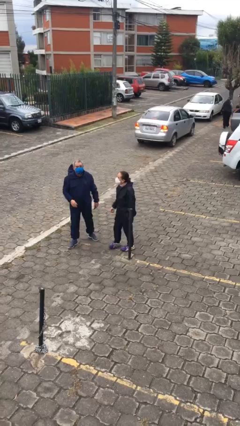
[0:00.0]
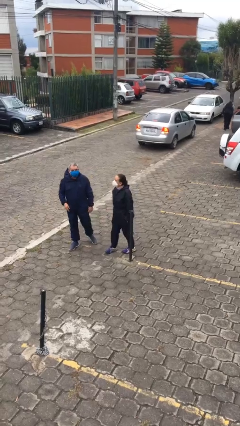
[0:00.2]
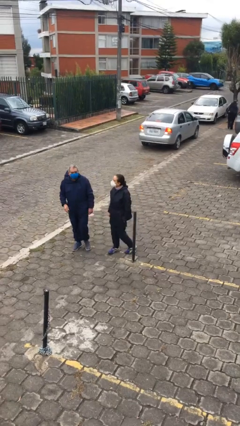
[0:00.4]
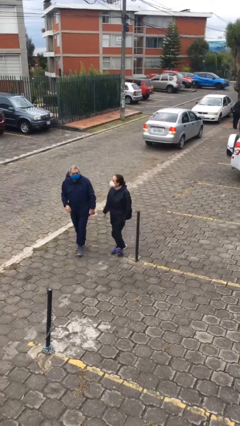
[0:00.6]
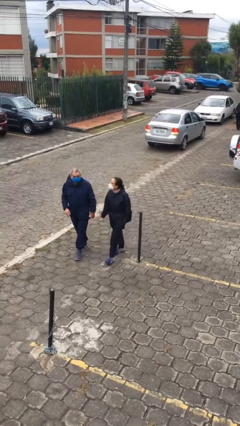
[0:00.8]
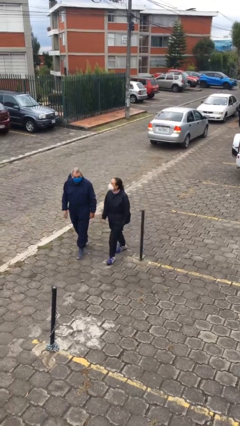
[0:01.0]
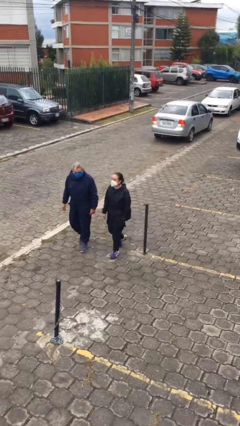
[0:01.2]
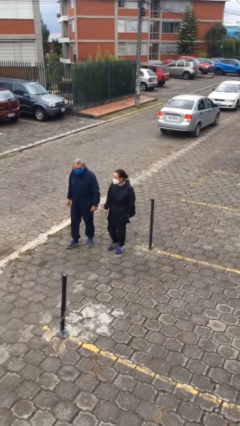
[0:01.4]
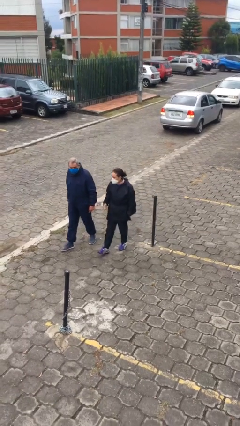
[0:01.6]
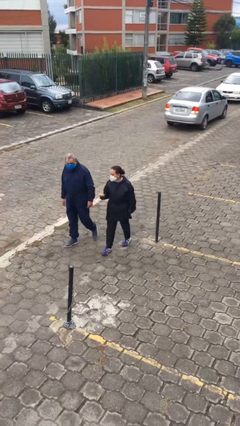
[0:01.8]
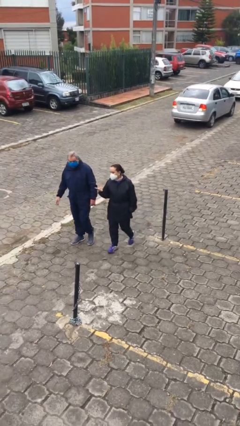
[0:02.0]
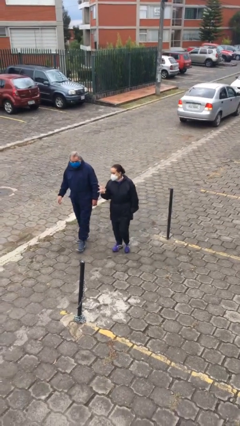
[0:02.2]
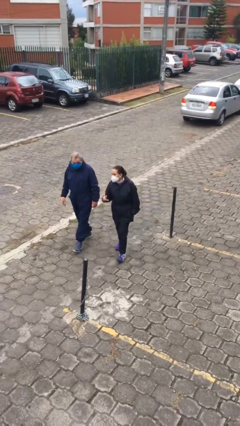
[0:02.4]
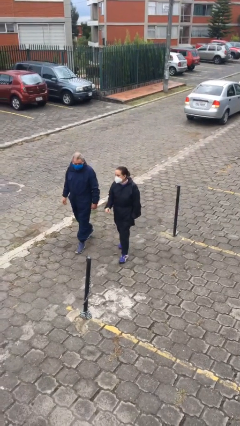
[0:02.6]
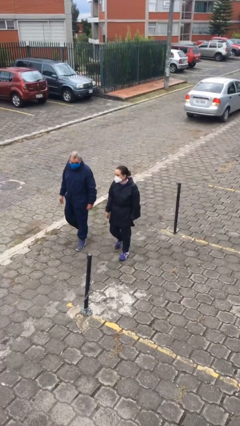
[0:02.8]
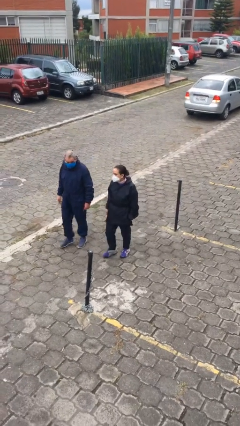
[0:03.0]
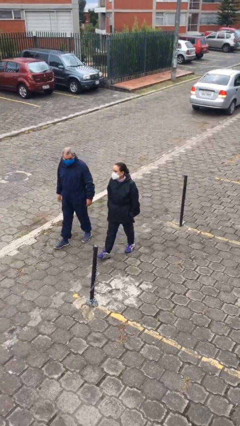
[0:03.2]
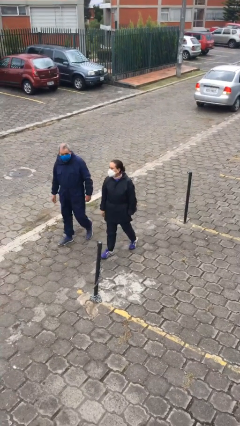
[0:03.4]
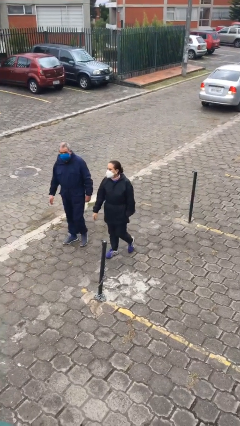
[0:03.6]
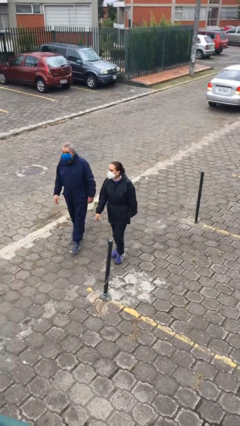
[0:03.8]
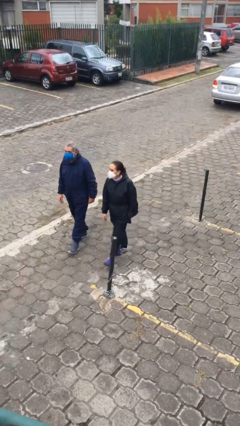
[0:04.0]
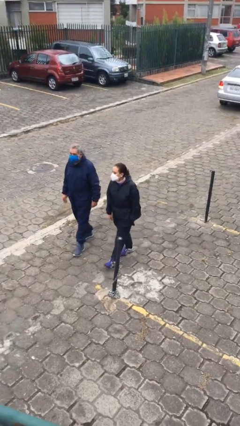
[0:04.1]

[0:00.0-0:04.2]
person talks to person

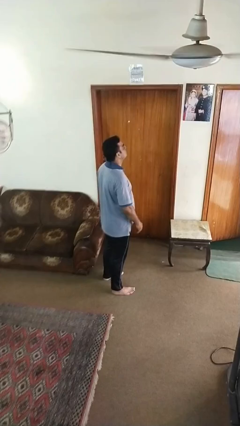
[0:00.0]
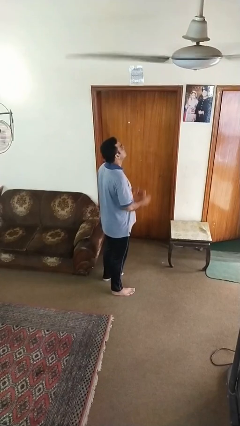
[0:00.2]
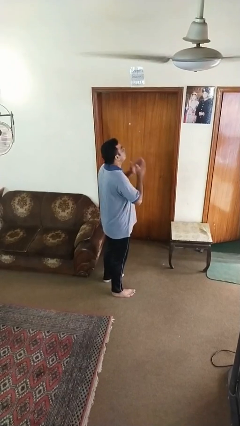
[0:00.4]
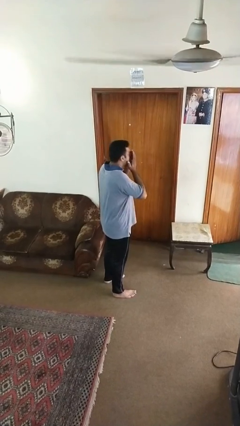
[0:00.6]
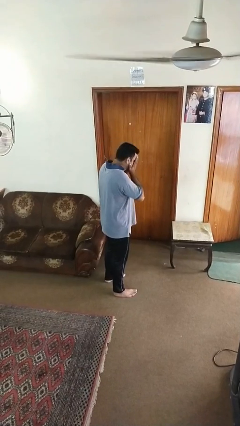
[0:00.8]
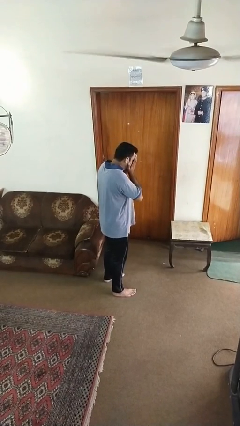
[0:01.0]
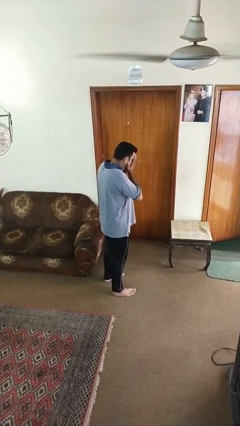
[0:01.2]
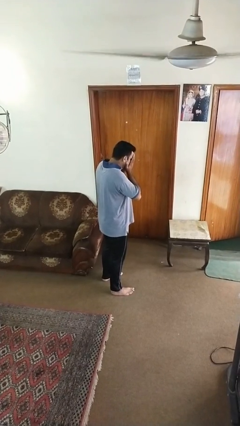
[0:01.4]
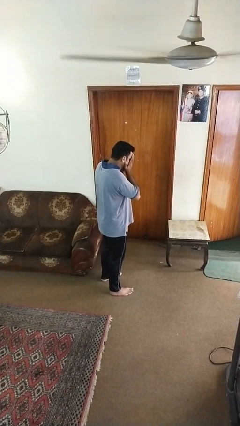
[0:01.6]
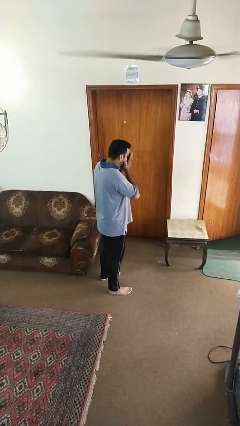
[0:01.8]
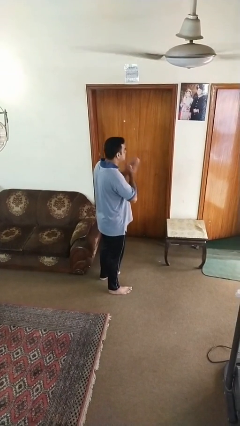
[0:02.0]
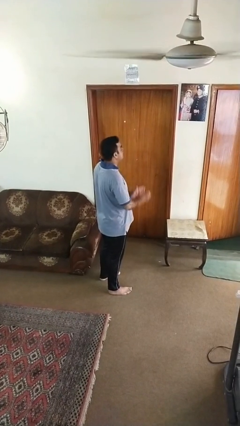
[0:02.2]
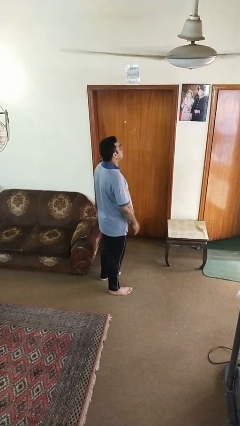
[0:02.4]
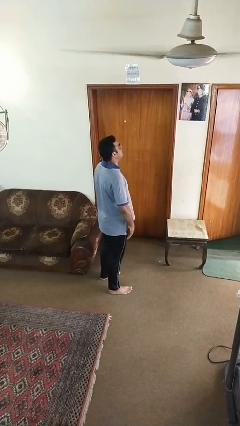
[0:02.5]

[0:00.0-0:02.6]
person sneezes into hand

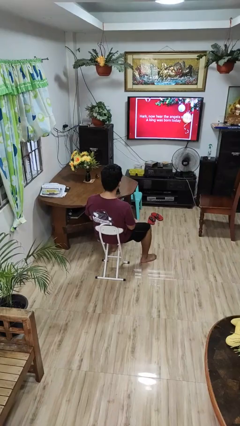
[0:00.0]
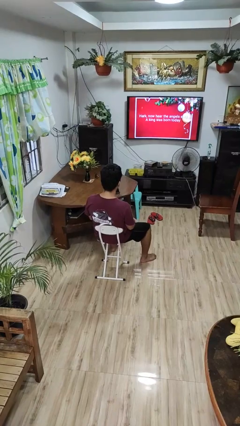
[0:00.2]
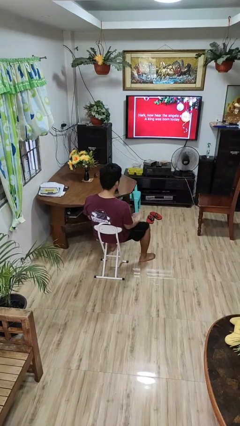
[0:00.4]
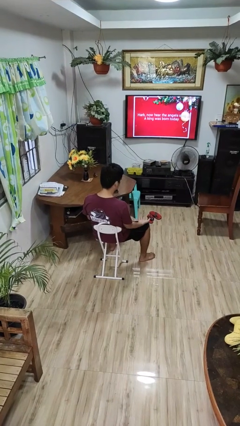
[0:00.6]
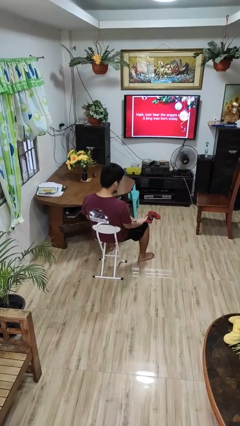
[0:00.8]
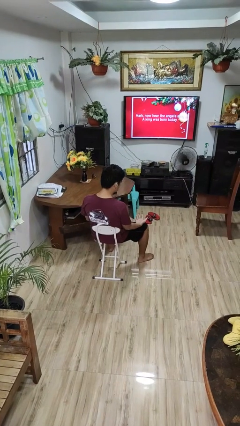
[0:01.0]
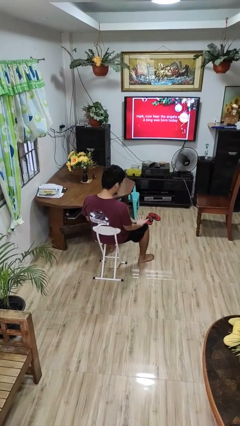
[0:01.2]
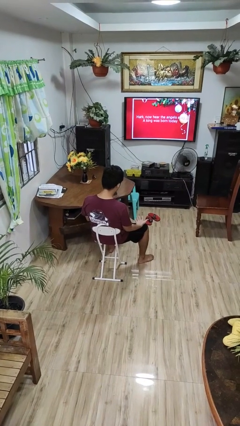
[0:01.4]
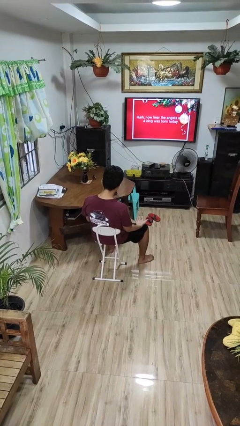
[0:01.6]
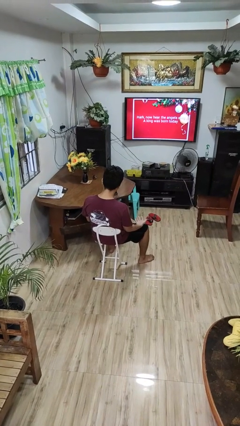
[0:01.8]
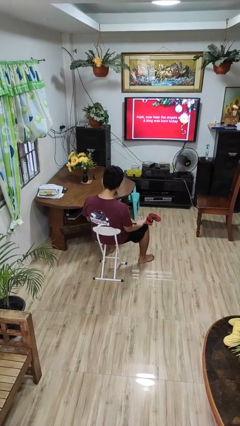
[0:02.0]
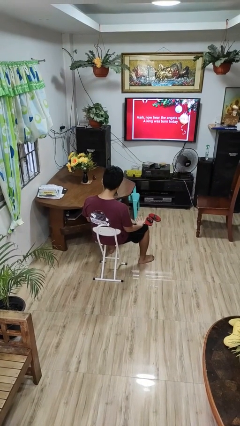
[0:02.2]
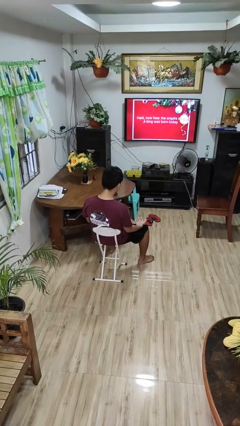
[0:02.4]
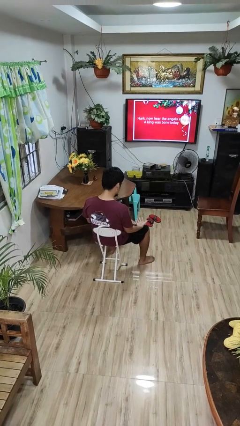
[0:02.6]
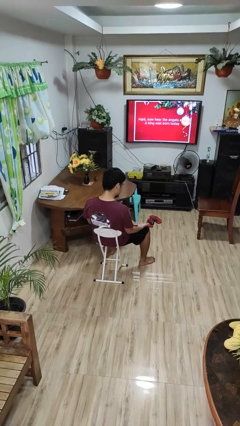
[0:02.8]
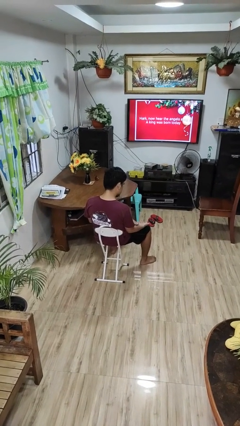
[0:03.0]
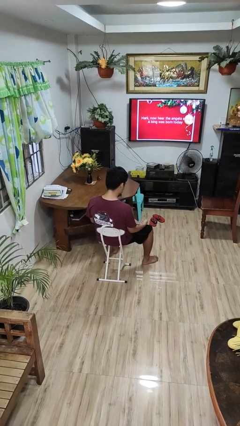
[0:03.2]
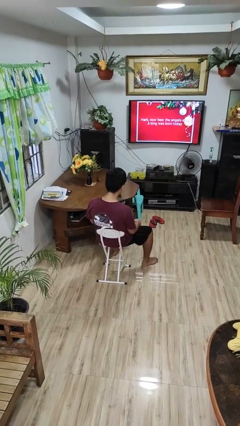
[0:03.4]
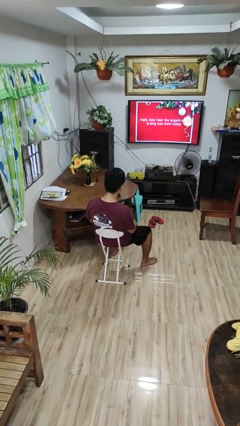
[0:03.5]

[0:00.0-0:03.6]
person looks at hands in lap

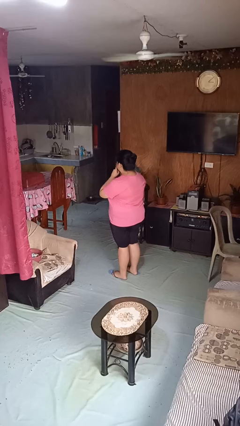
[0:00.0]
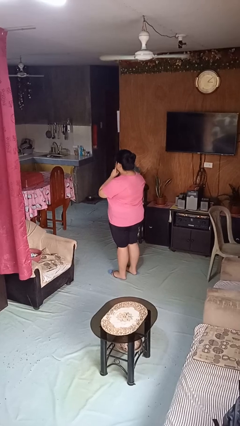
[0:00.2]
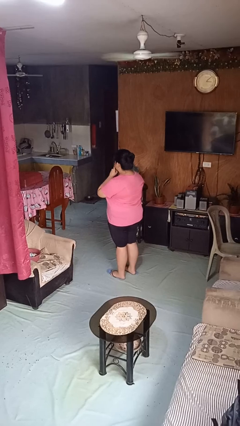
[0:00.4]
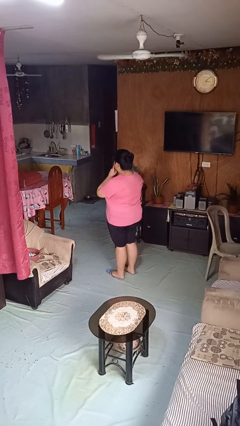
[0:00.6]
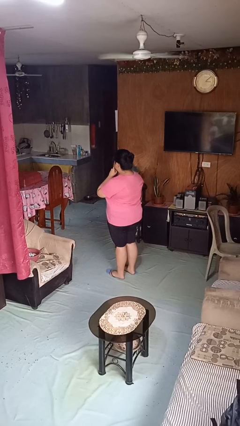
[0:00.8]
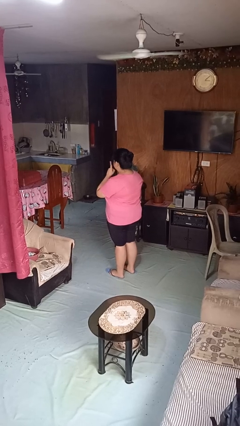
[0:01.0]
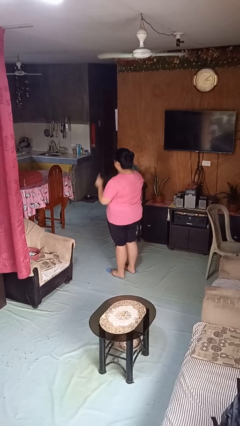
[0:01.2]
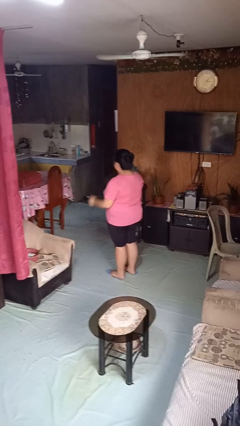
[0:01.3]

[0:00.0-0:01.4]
person gestures be quiet

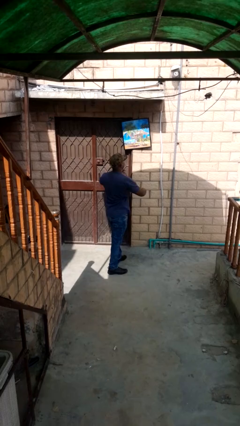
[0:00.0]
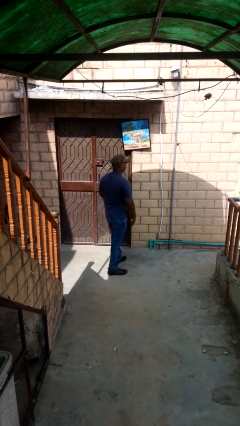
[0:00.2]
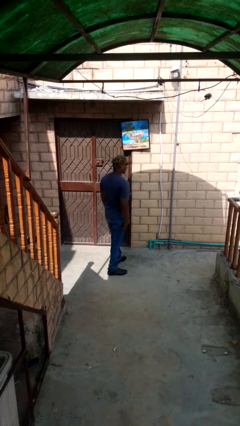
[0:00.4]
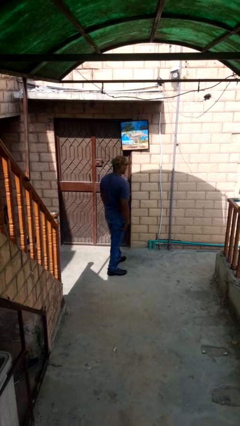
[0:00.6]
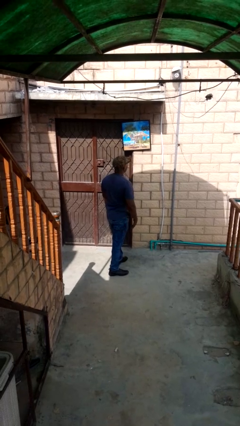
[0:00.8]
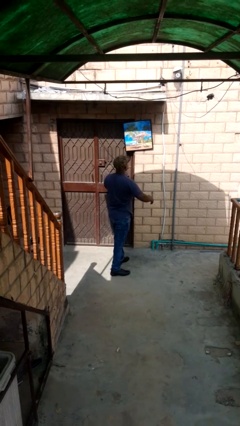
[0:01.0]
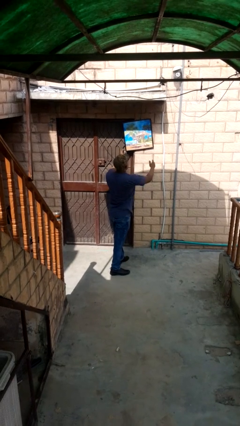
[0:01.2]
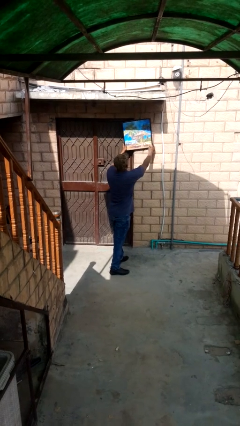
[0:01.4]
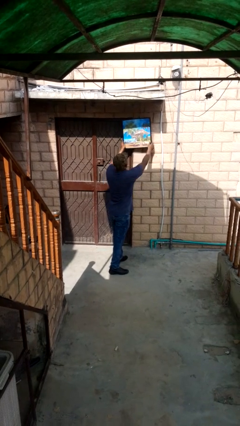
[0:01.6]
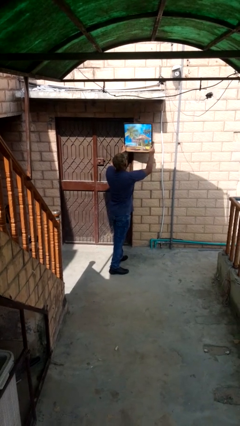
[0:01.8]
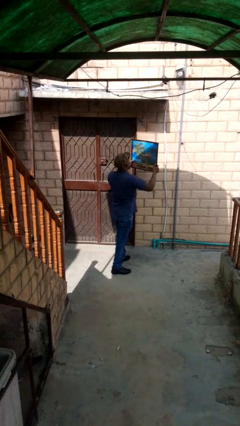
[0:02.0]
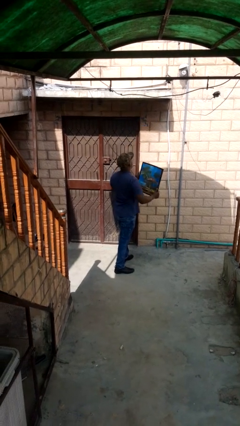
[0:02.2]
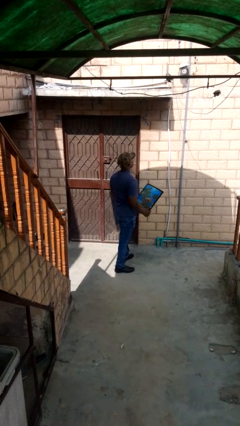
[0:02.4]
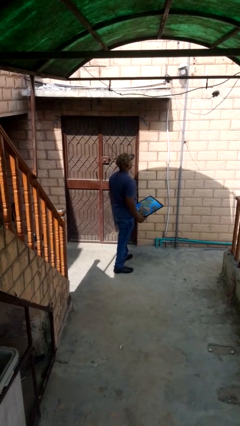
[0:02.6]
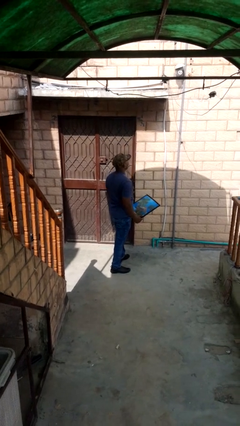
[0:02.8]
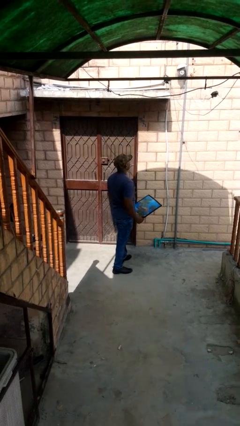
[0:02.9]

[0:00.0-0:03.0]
person takes down picture frame

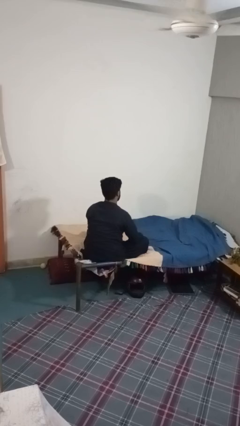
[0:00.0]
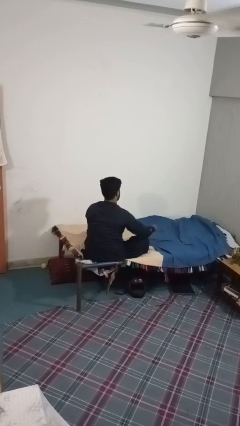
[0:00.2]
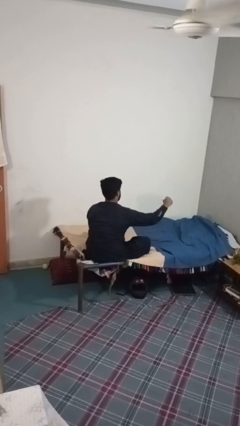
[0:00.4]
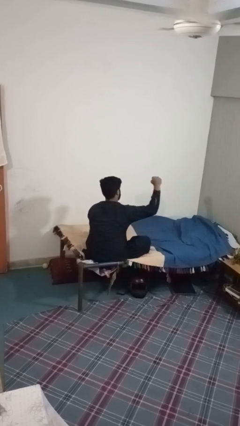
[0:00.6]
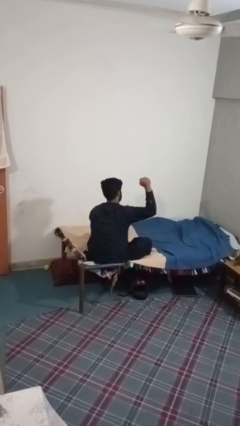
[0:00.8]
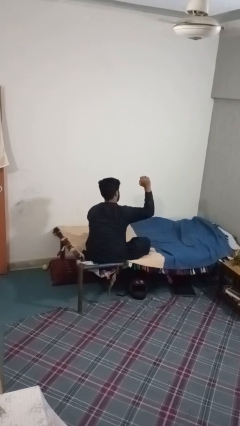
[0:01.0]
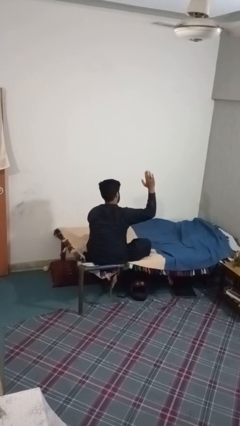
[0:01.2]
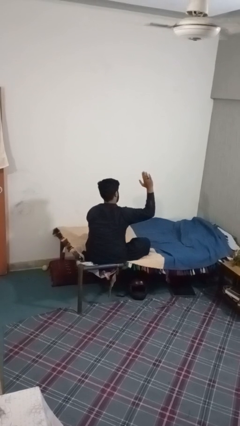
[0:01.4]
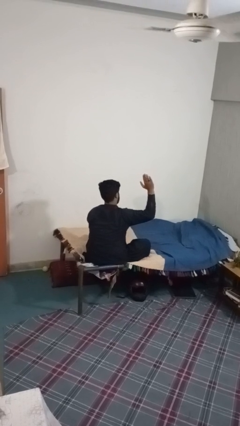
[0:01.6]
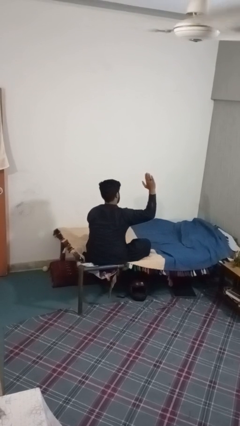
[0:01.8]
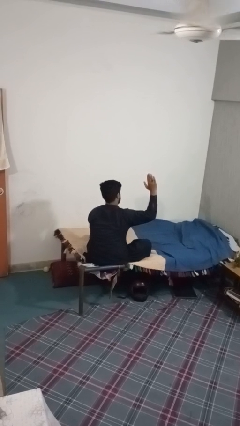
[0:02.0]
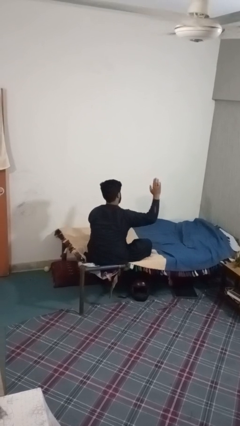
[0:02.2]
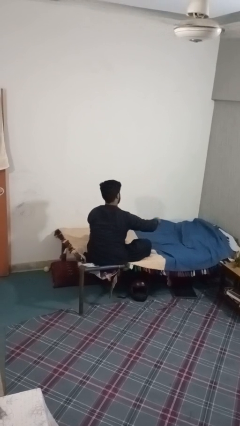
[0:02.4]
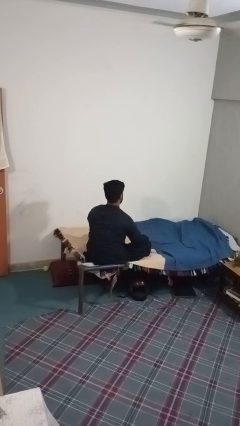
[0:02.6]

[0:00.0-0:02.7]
person gestures stop

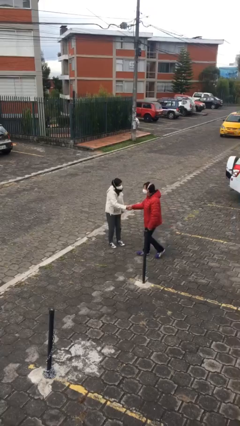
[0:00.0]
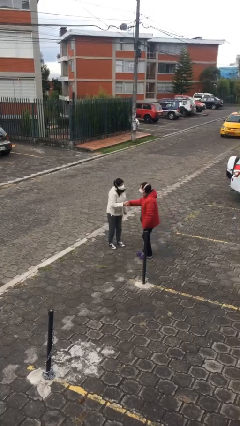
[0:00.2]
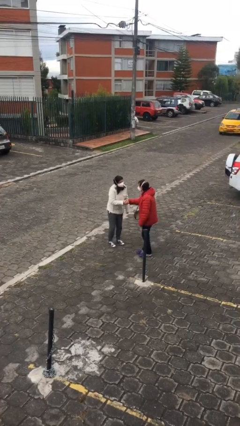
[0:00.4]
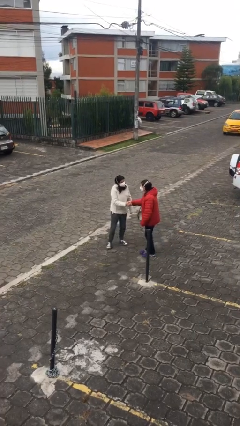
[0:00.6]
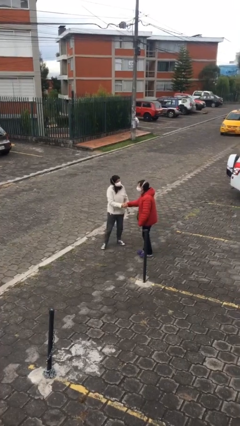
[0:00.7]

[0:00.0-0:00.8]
person shakes hand
